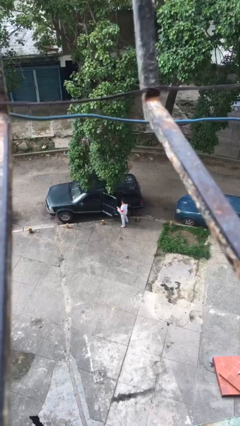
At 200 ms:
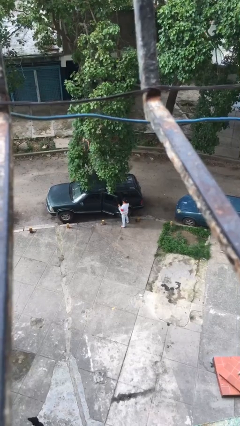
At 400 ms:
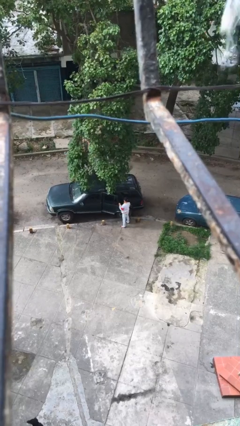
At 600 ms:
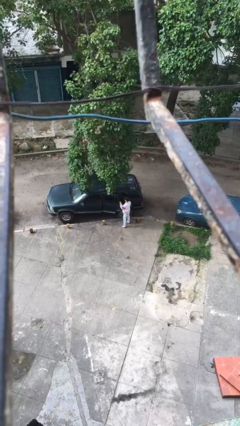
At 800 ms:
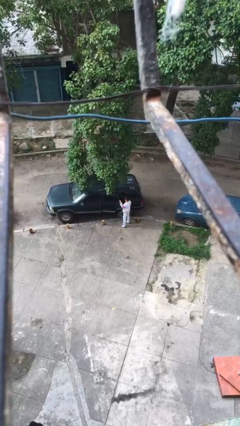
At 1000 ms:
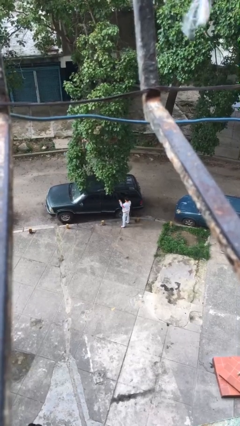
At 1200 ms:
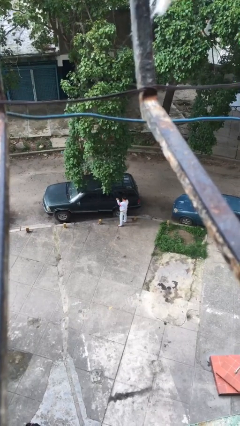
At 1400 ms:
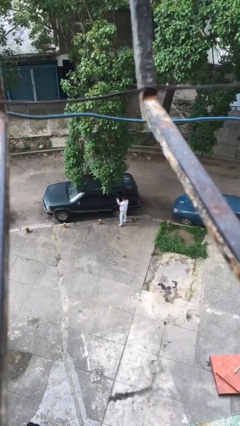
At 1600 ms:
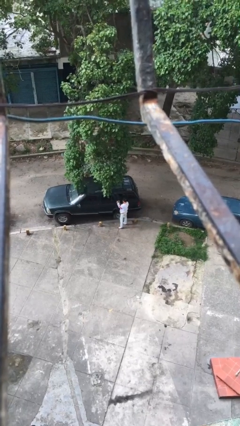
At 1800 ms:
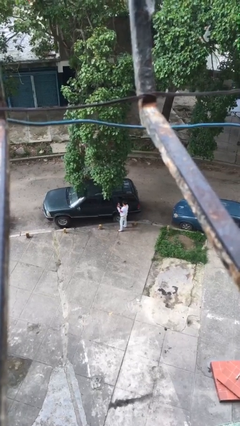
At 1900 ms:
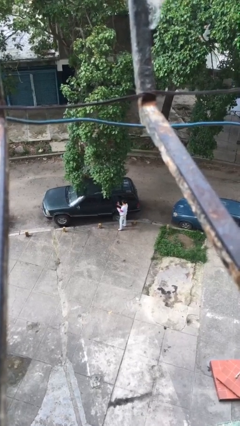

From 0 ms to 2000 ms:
person closes car door

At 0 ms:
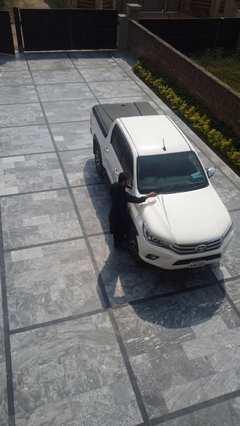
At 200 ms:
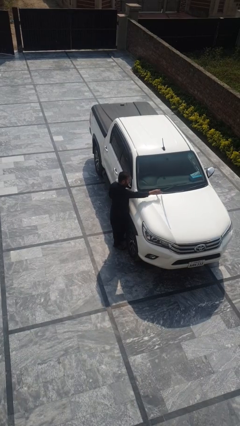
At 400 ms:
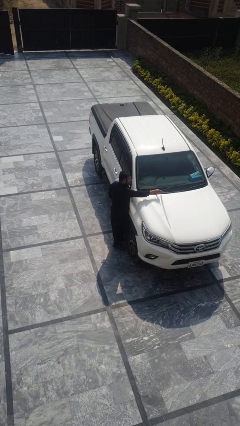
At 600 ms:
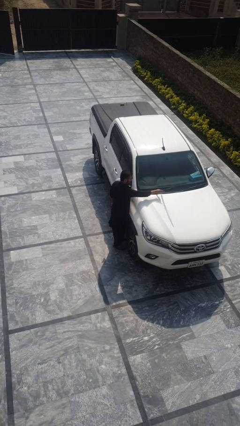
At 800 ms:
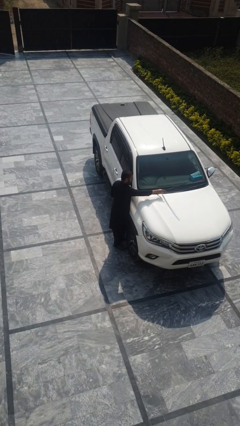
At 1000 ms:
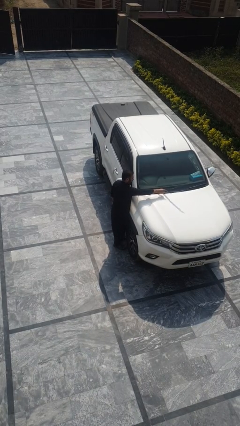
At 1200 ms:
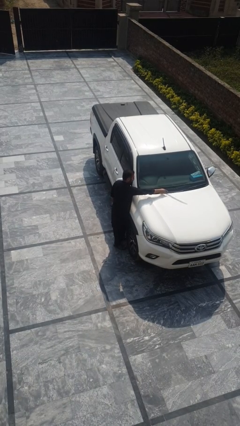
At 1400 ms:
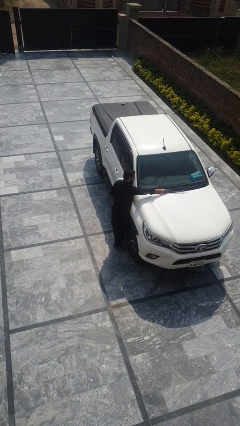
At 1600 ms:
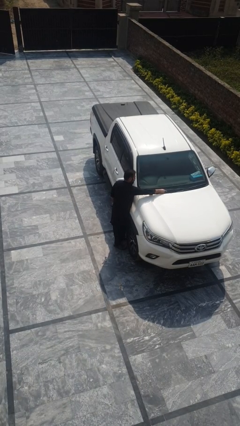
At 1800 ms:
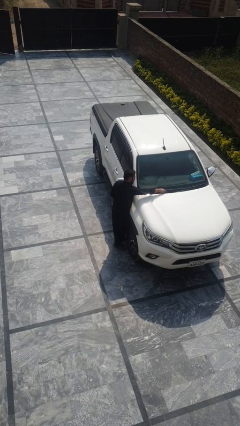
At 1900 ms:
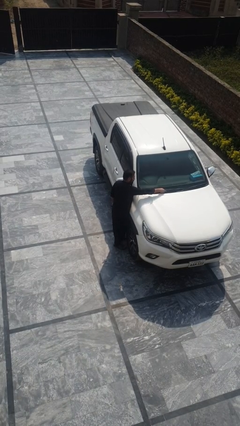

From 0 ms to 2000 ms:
person flips down car wipers

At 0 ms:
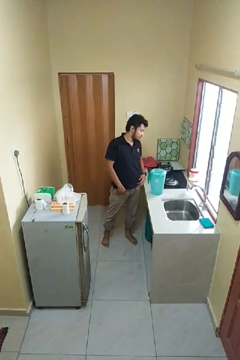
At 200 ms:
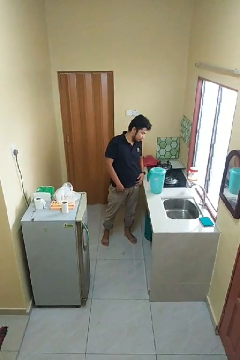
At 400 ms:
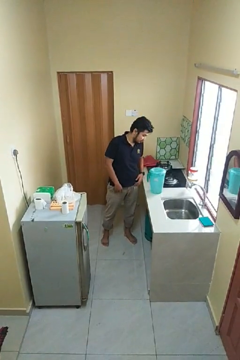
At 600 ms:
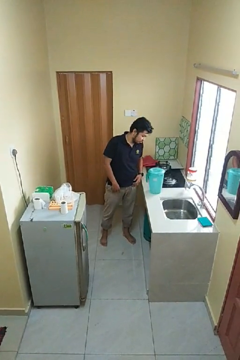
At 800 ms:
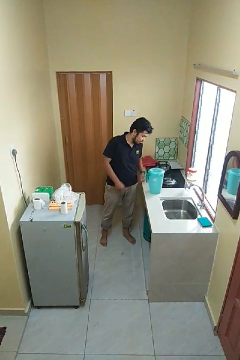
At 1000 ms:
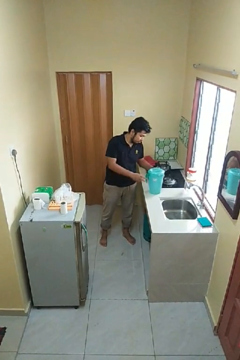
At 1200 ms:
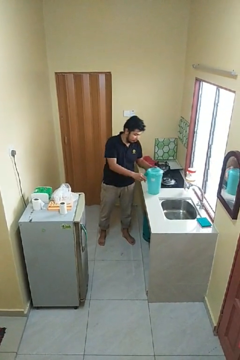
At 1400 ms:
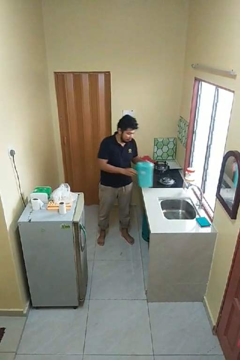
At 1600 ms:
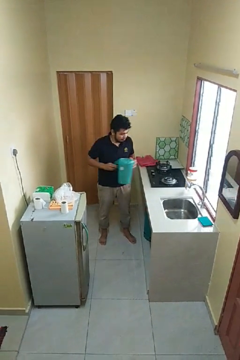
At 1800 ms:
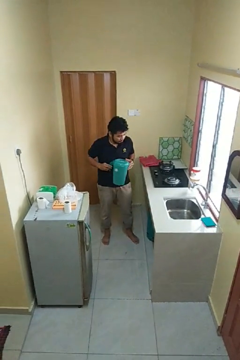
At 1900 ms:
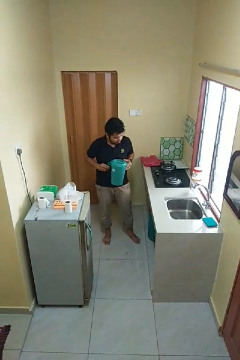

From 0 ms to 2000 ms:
person picks up object from countertop

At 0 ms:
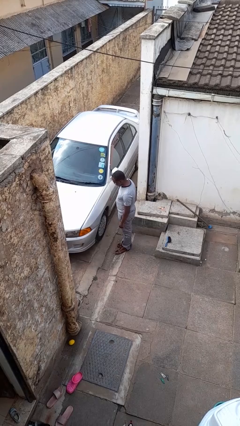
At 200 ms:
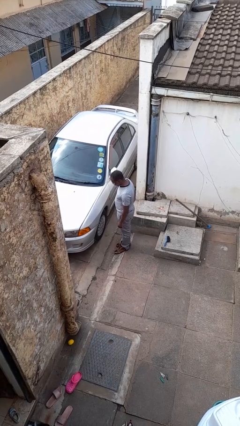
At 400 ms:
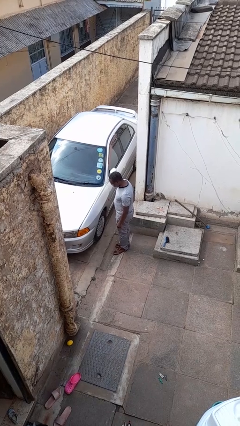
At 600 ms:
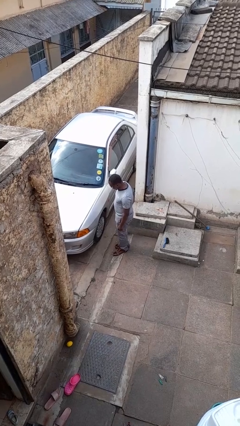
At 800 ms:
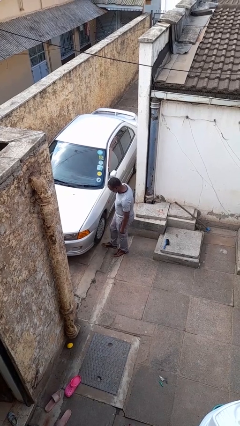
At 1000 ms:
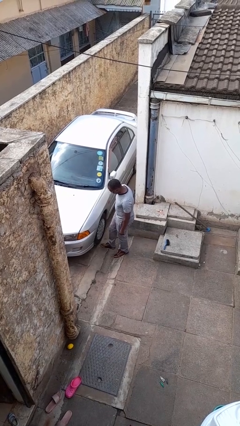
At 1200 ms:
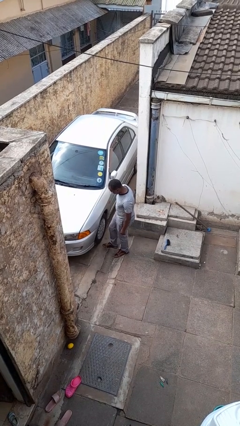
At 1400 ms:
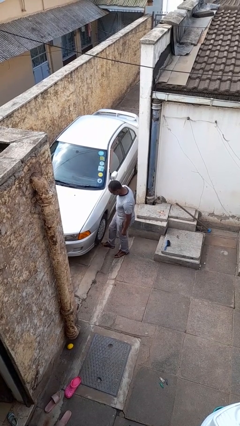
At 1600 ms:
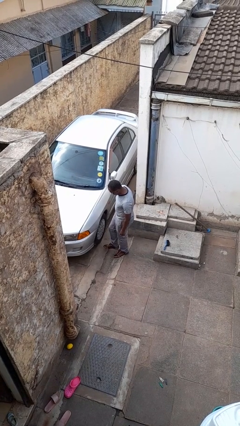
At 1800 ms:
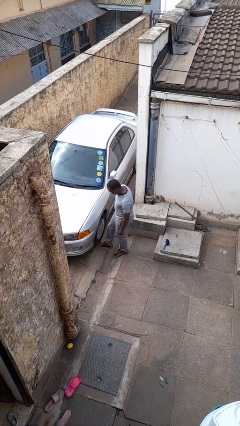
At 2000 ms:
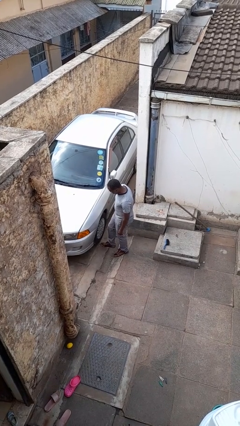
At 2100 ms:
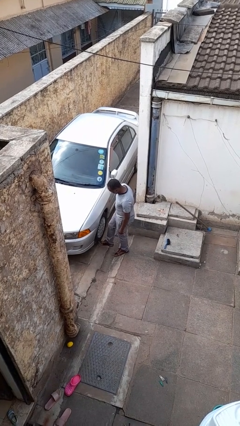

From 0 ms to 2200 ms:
person kicks car tires

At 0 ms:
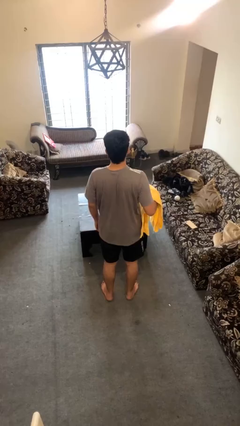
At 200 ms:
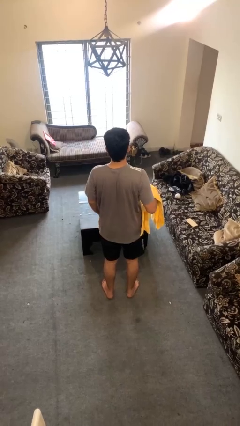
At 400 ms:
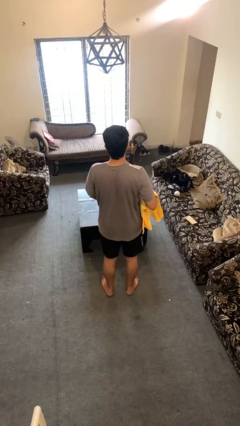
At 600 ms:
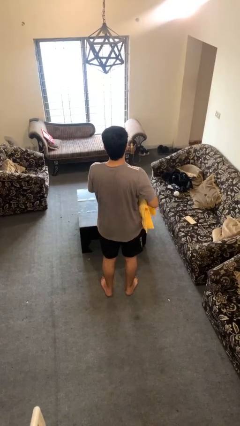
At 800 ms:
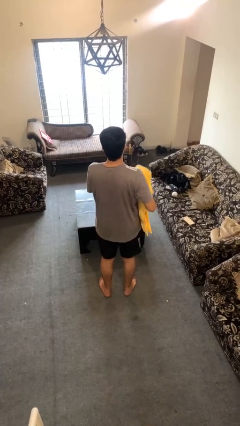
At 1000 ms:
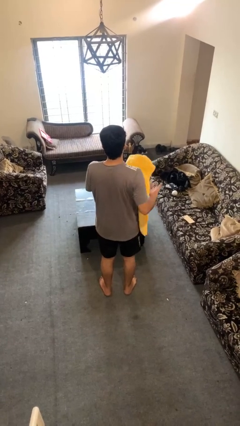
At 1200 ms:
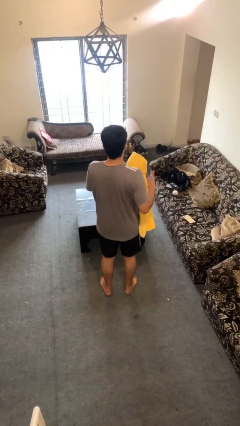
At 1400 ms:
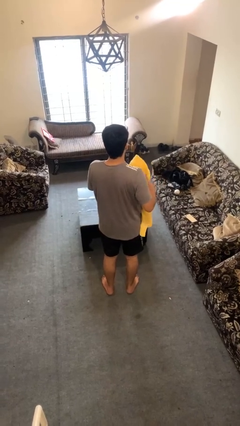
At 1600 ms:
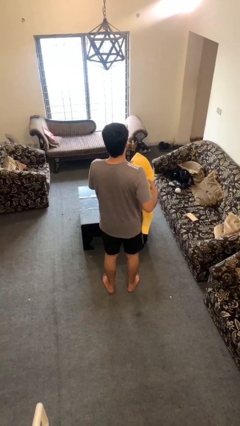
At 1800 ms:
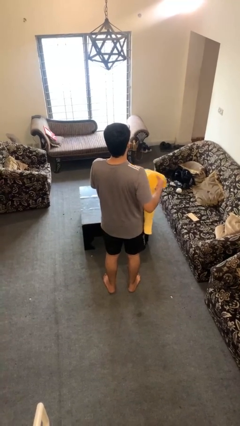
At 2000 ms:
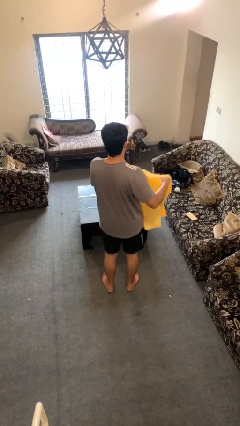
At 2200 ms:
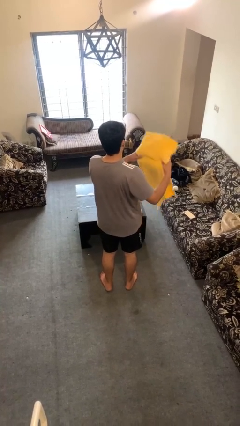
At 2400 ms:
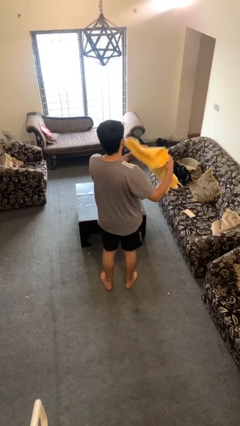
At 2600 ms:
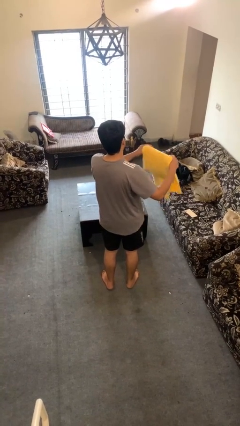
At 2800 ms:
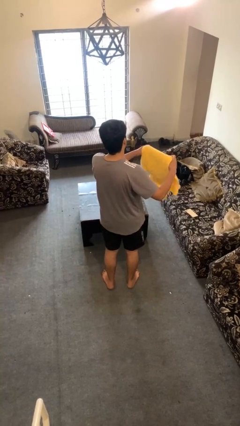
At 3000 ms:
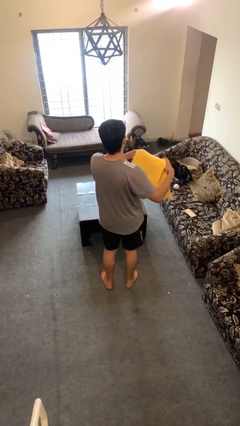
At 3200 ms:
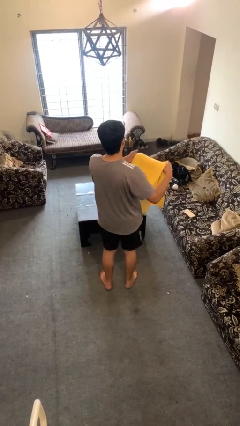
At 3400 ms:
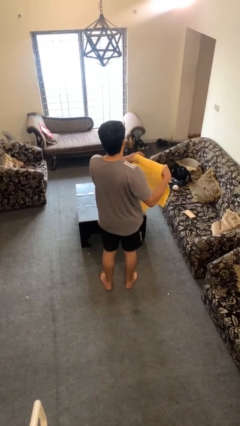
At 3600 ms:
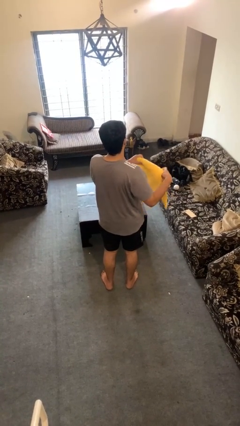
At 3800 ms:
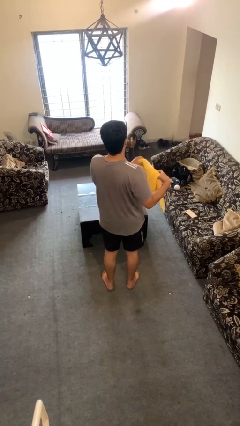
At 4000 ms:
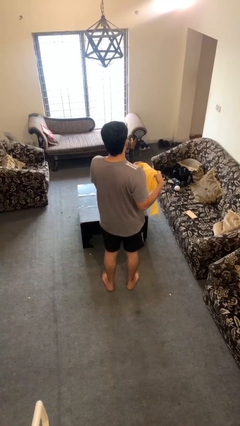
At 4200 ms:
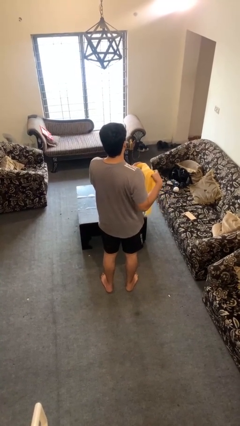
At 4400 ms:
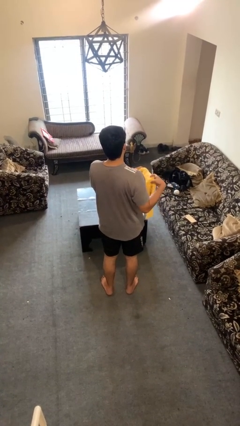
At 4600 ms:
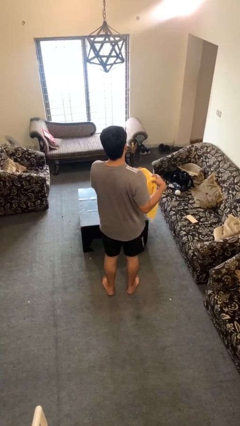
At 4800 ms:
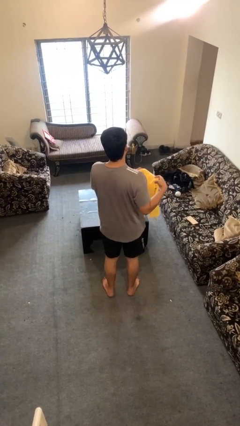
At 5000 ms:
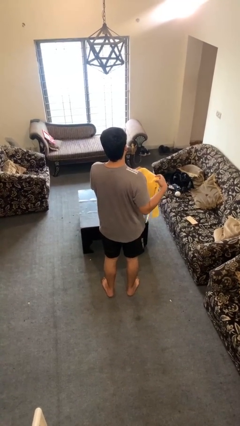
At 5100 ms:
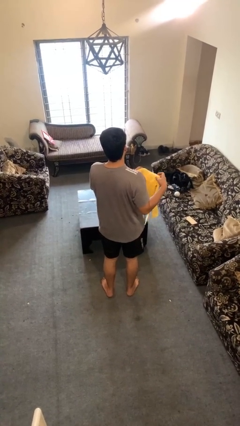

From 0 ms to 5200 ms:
person folds towel

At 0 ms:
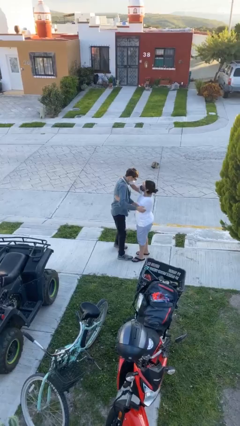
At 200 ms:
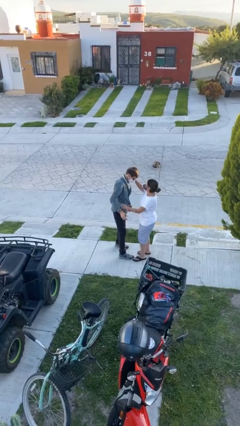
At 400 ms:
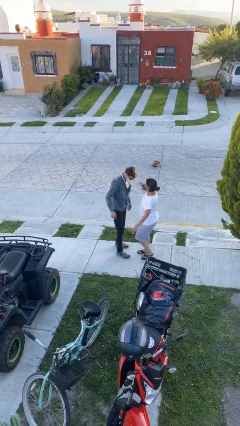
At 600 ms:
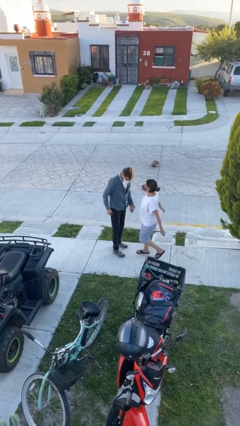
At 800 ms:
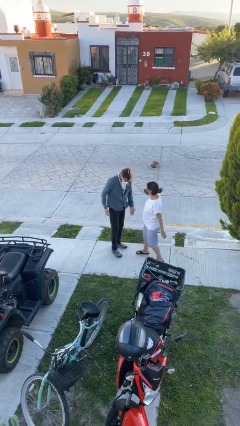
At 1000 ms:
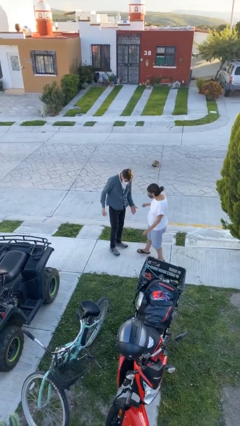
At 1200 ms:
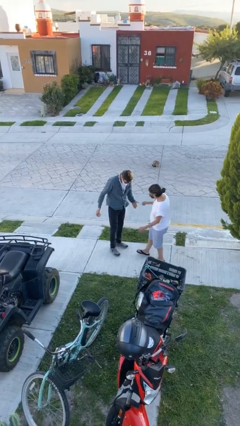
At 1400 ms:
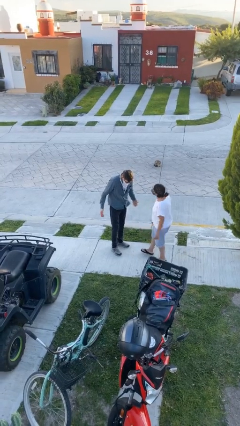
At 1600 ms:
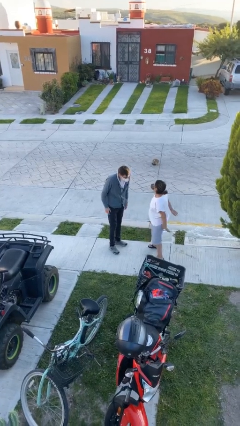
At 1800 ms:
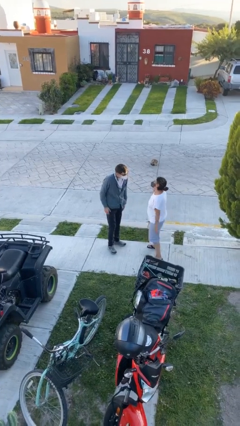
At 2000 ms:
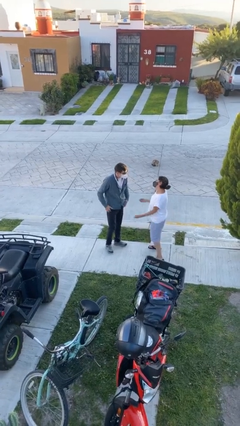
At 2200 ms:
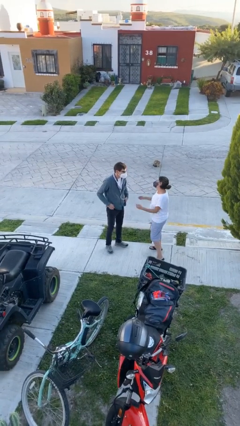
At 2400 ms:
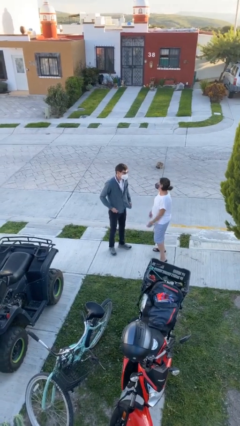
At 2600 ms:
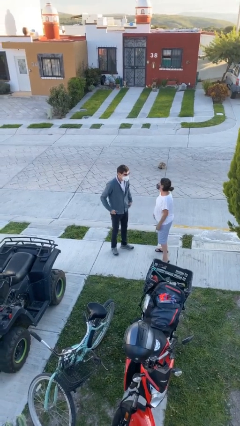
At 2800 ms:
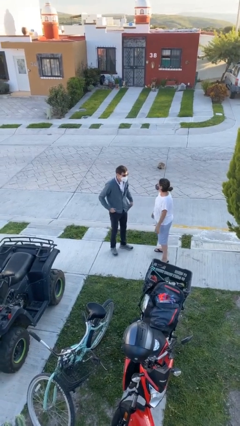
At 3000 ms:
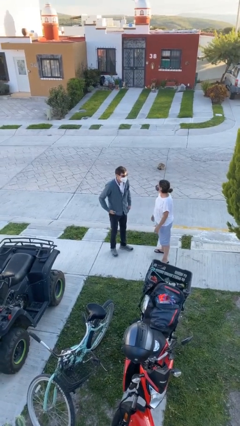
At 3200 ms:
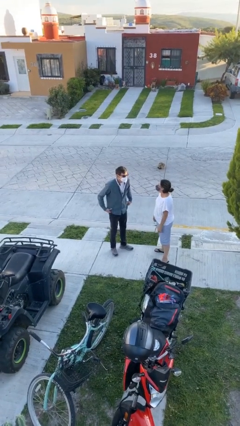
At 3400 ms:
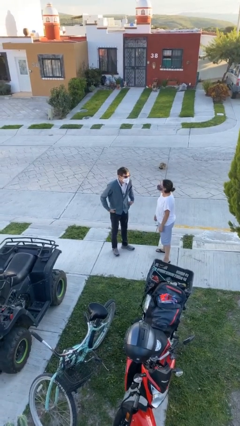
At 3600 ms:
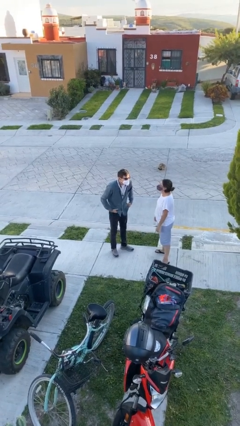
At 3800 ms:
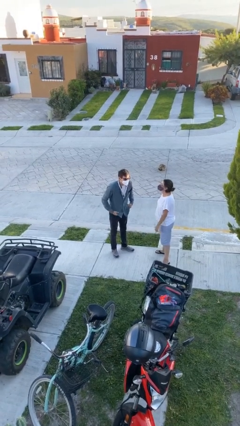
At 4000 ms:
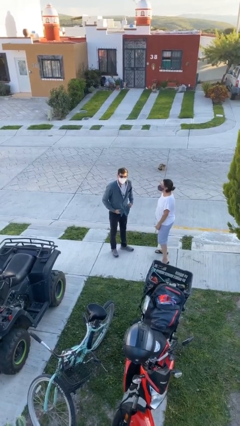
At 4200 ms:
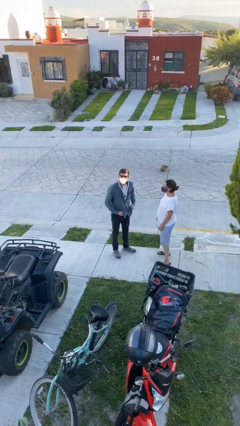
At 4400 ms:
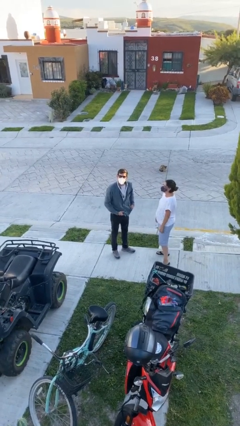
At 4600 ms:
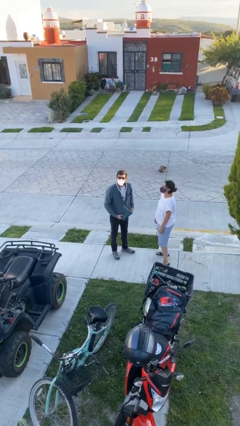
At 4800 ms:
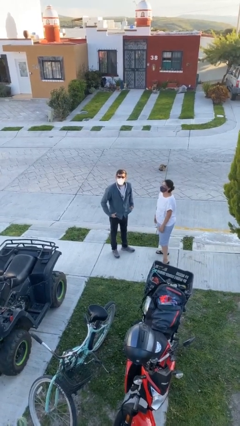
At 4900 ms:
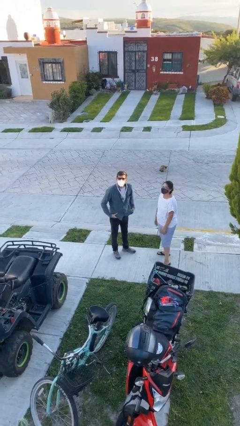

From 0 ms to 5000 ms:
person talks to person
